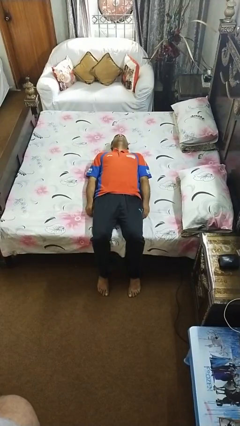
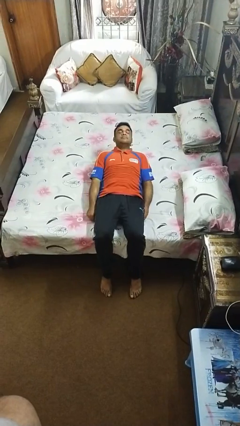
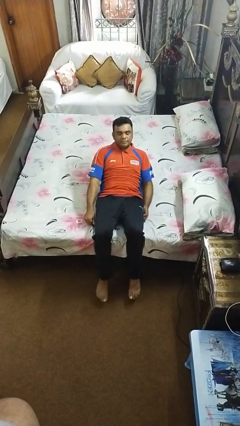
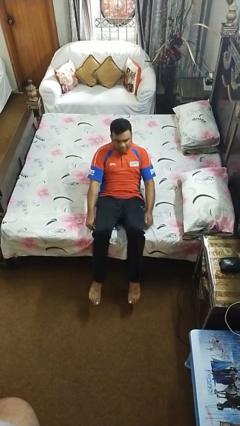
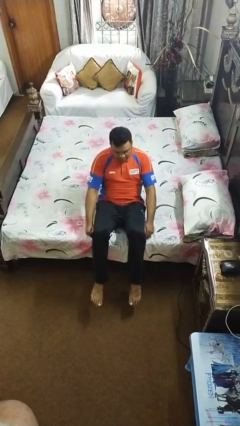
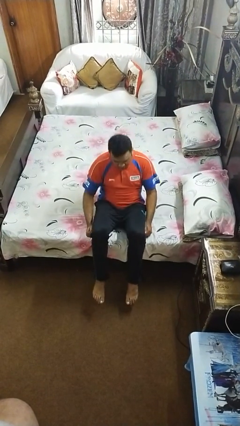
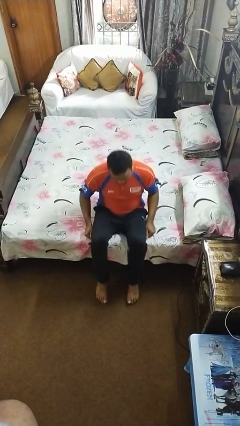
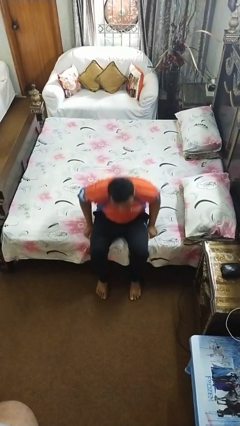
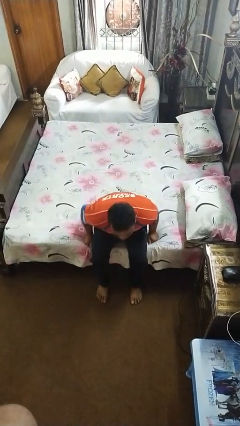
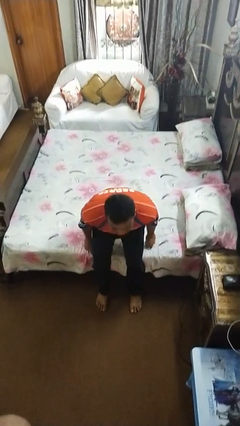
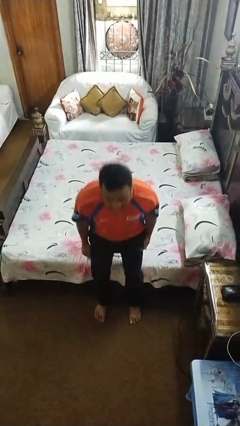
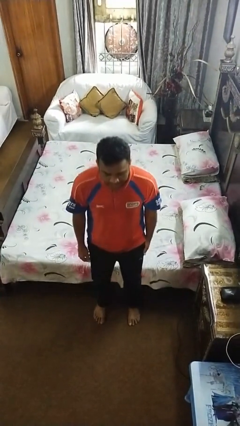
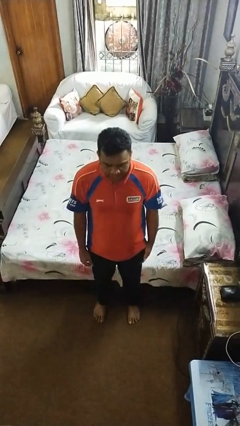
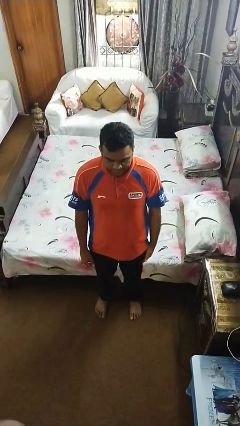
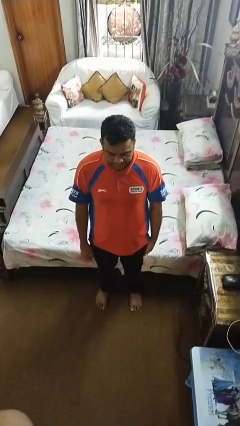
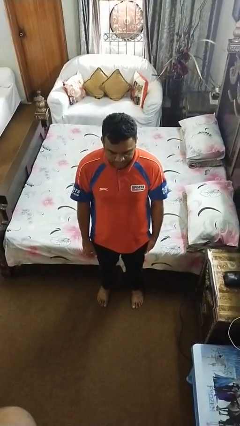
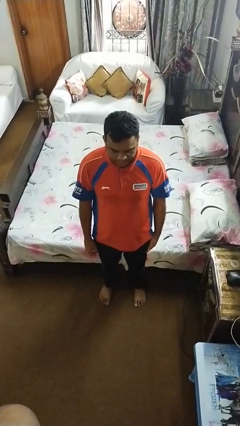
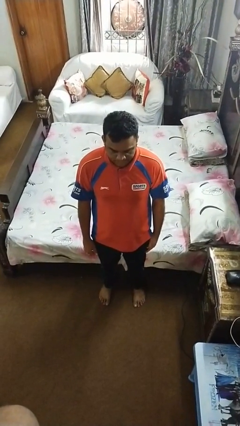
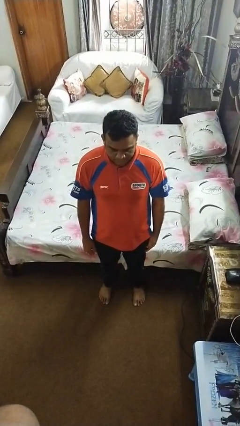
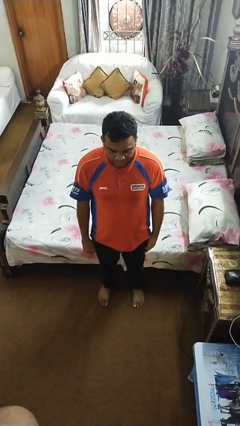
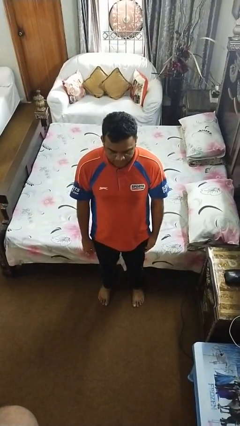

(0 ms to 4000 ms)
person stands up

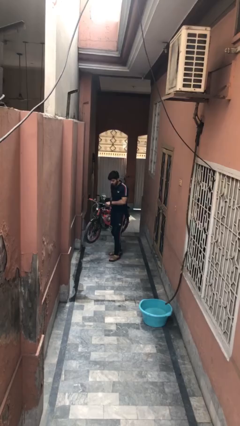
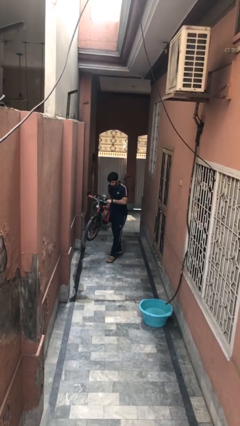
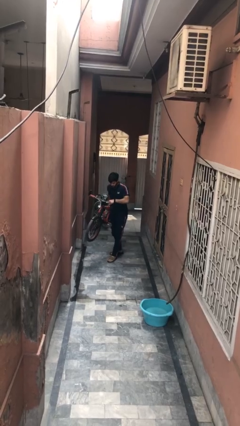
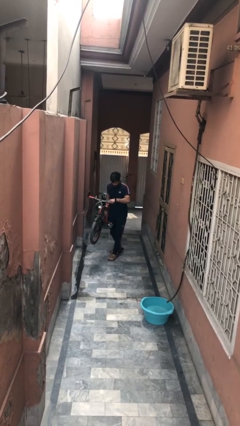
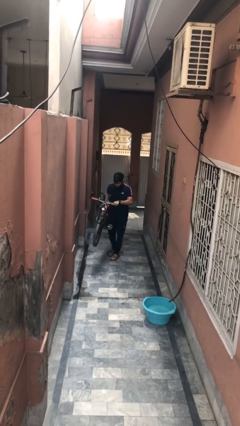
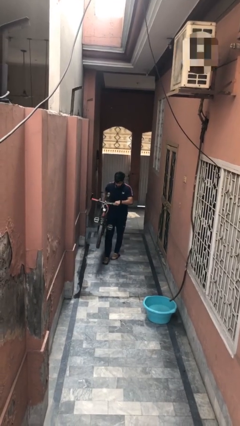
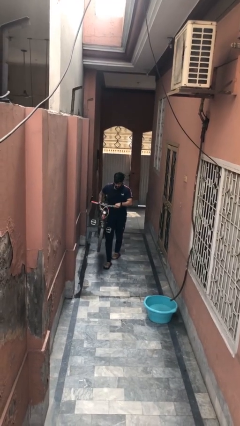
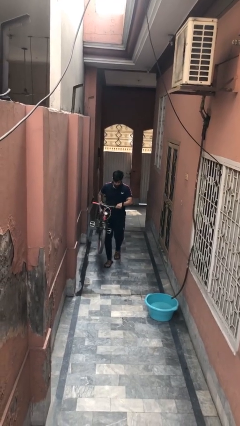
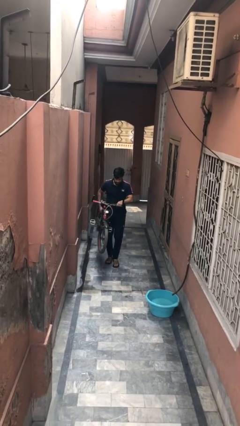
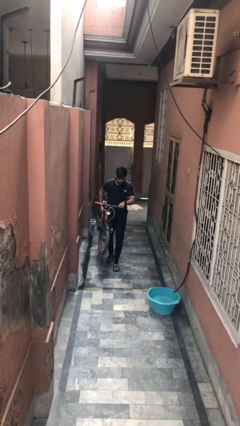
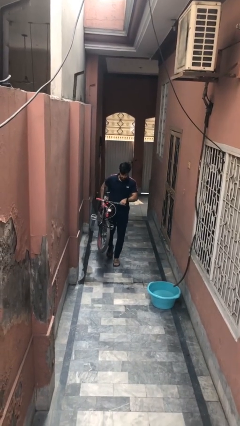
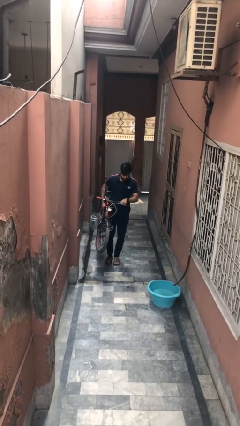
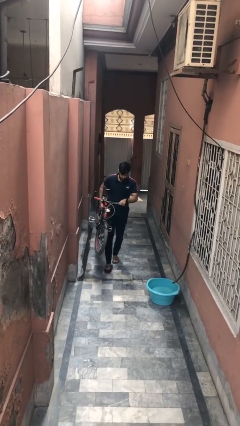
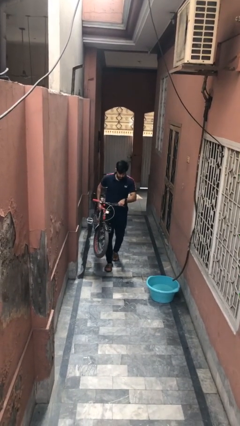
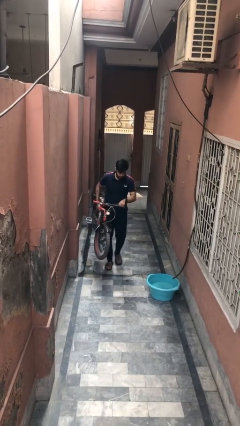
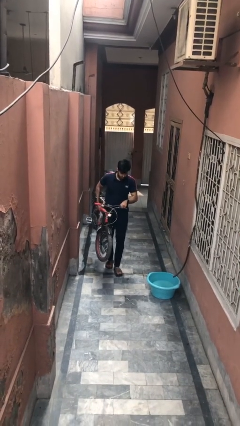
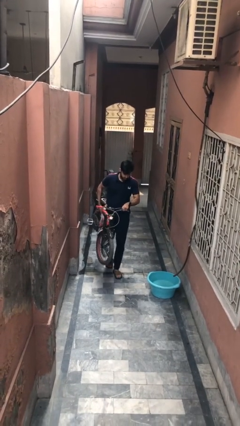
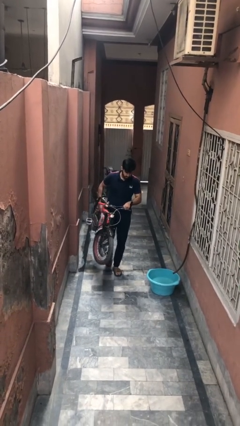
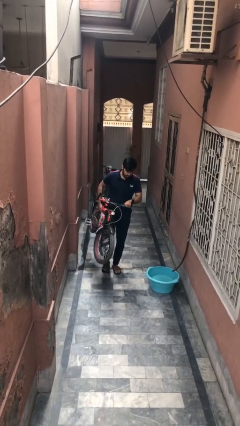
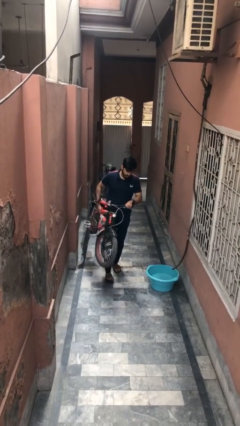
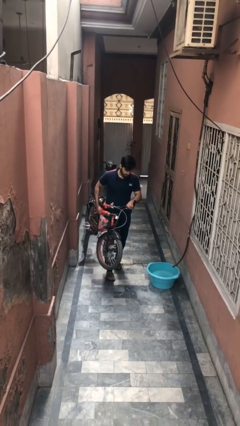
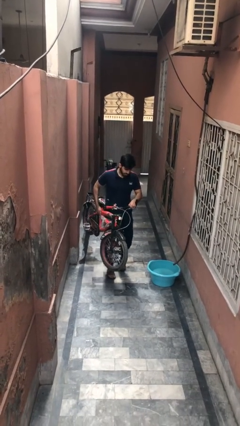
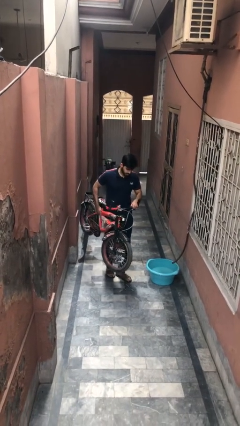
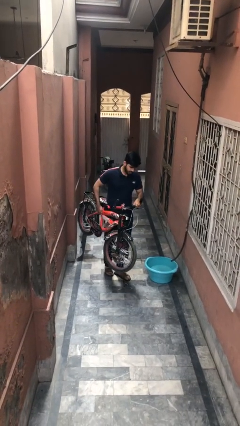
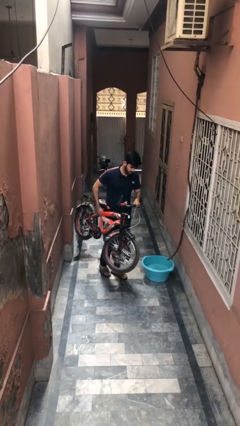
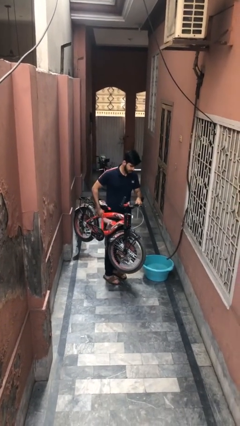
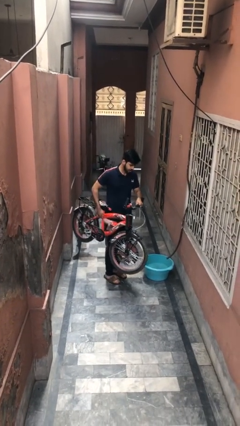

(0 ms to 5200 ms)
person carries bicycle

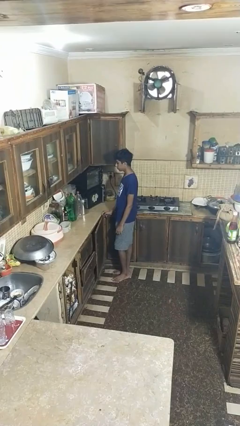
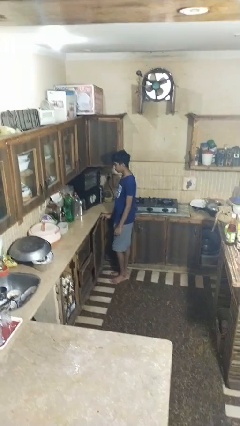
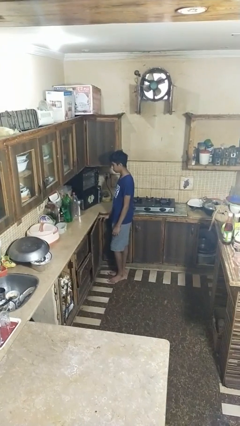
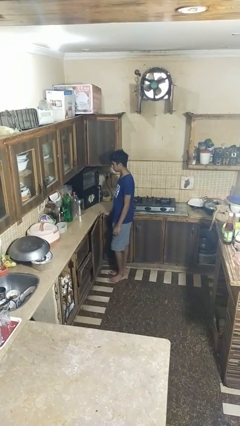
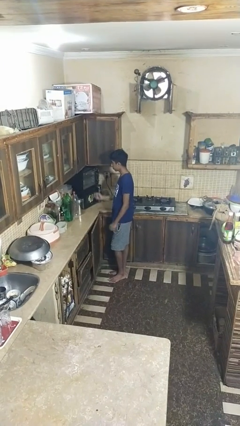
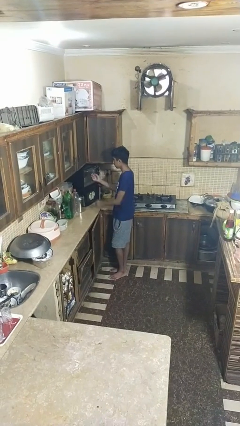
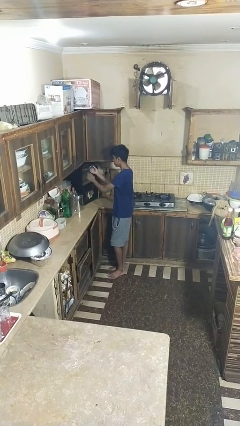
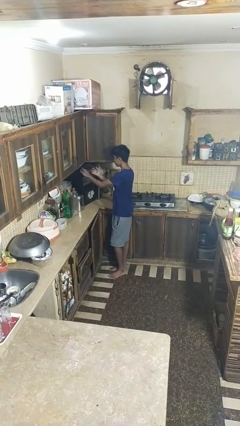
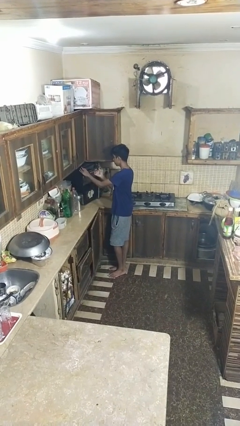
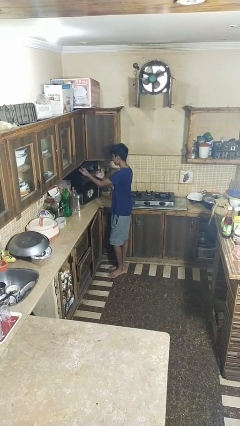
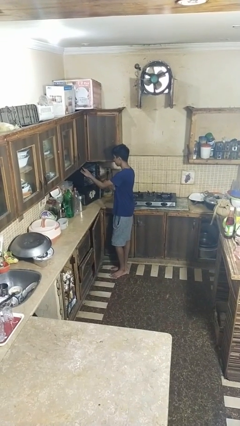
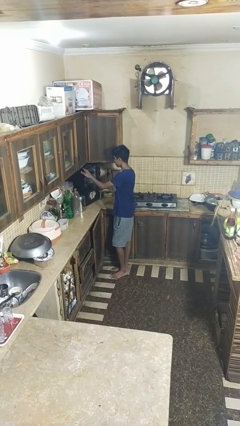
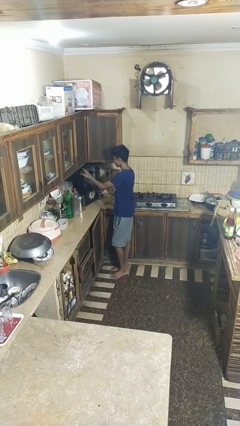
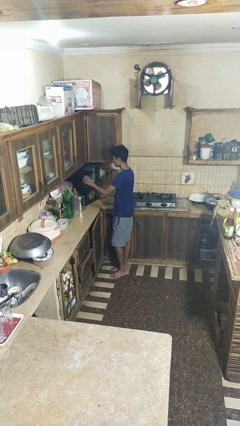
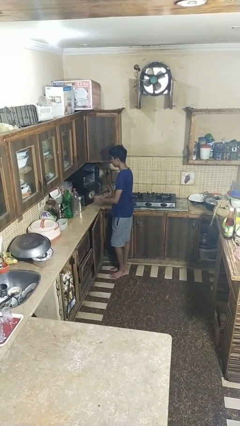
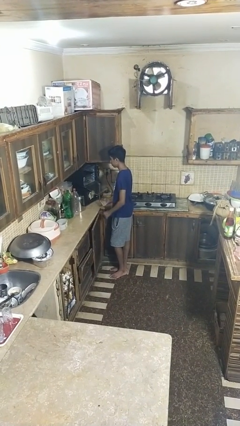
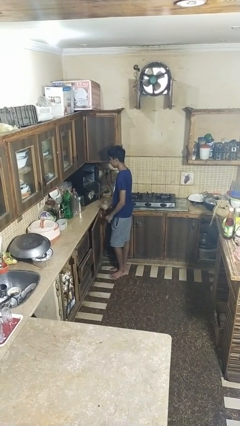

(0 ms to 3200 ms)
person opens oven door

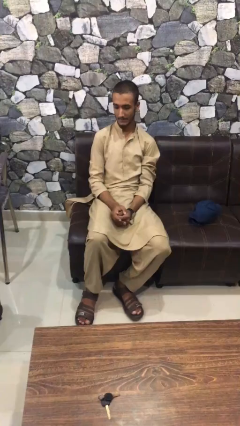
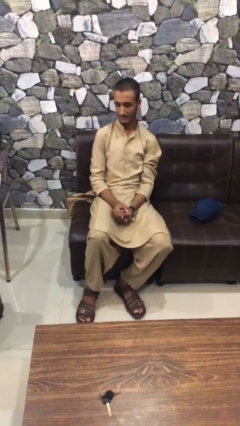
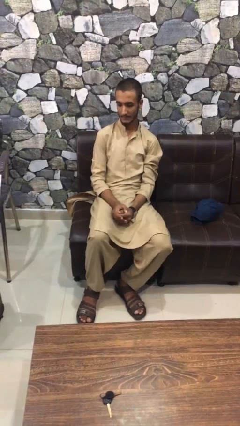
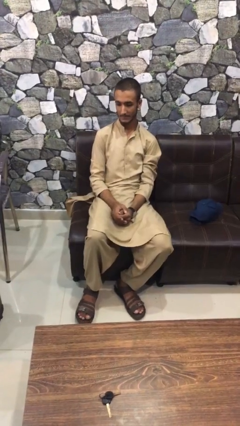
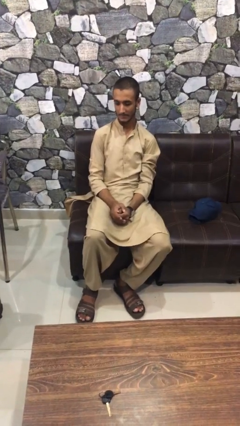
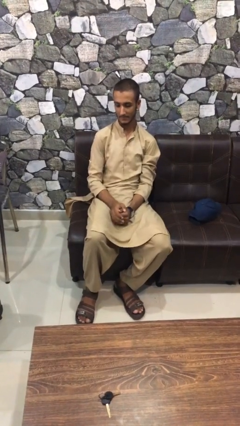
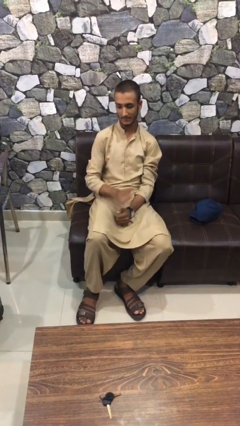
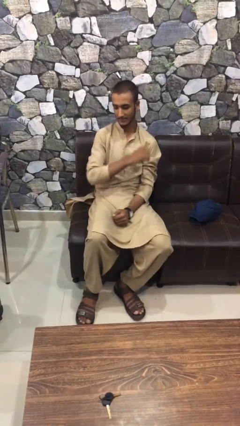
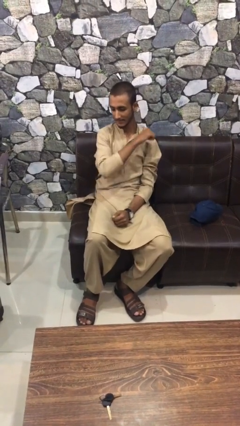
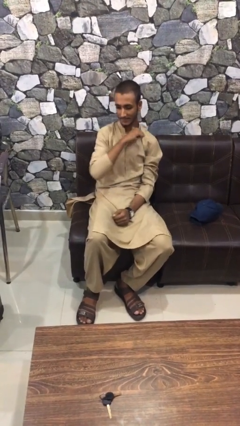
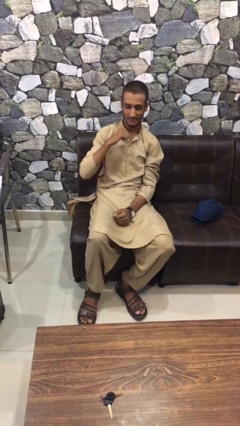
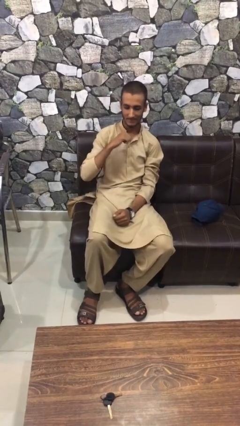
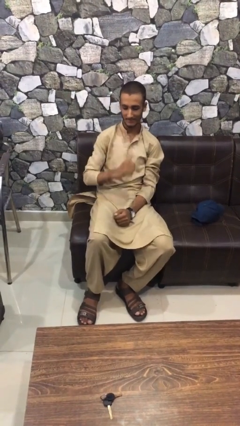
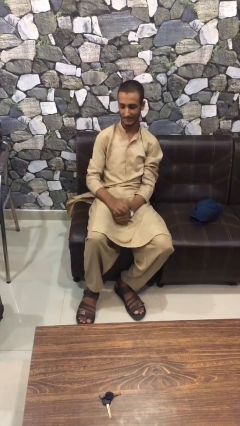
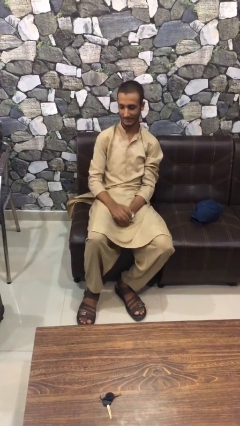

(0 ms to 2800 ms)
person gestures cut

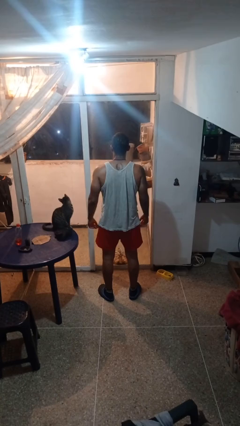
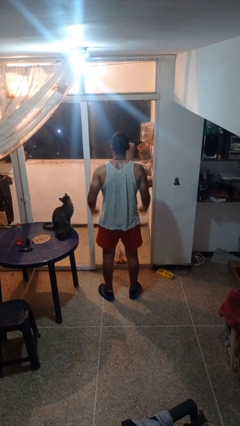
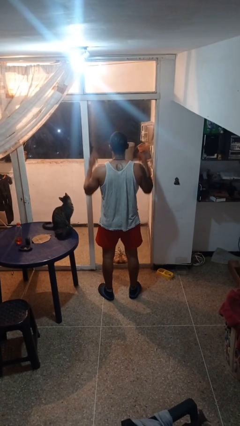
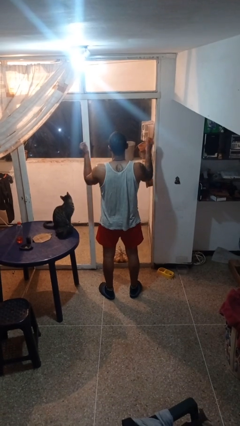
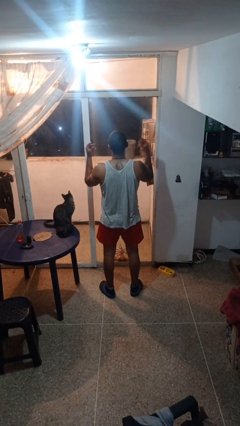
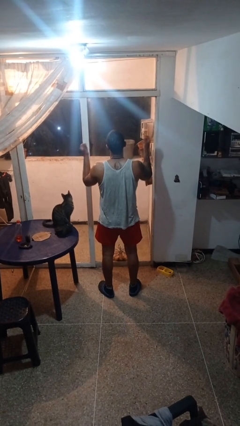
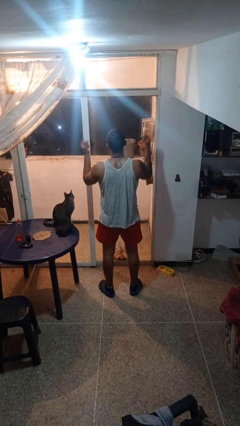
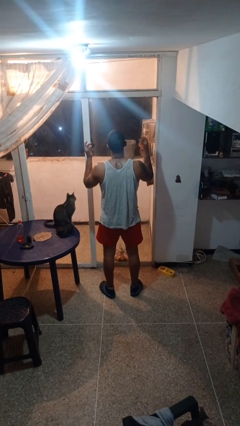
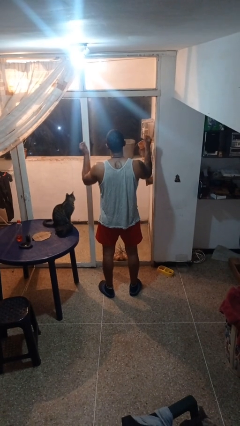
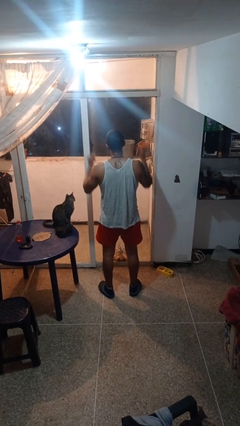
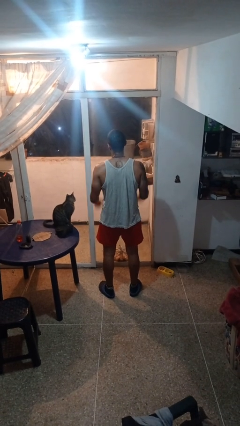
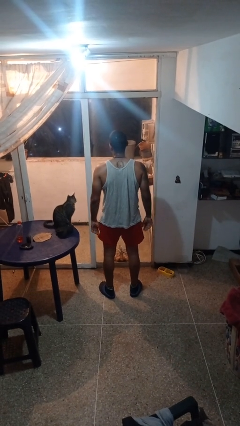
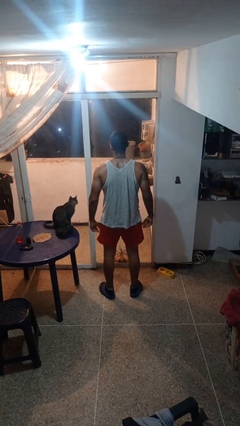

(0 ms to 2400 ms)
person snaps fingers

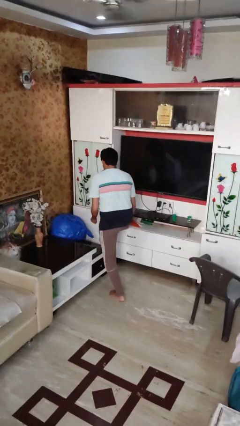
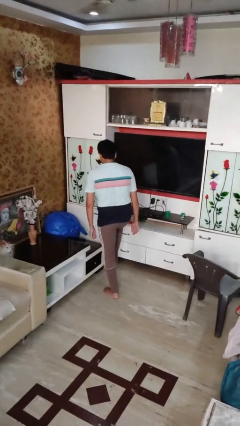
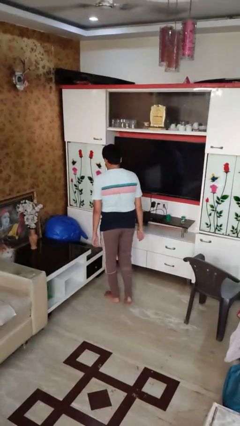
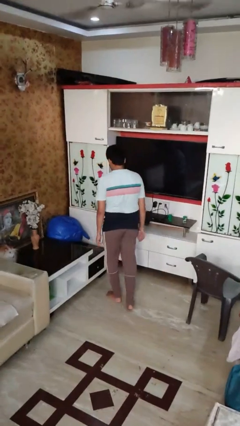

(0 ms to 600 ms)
person climbs off table
